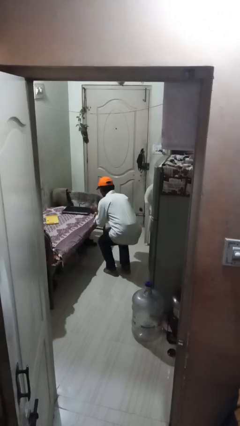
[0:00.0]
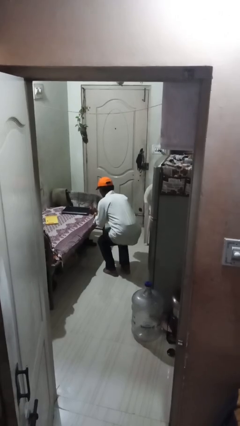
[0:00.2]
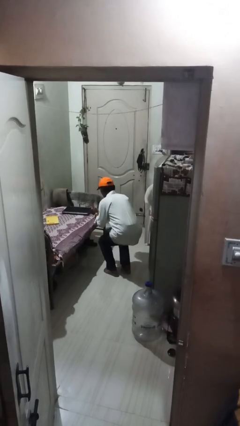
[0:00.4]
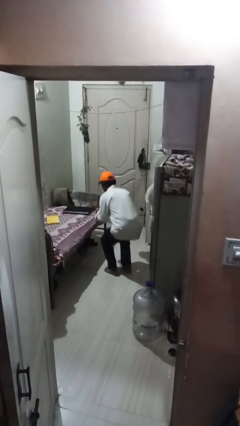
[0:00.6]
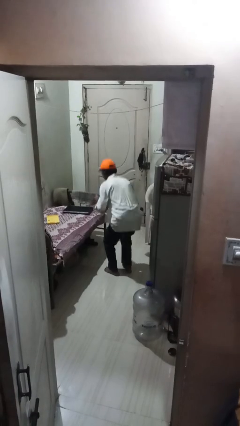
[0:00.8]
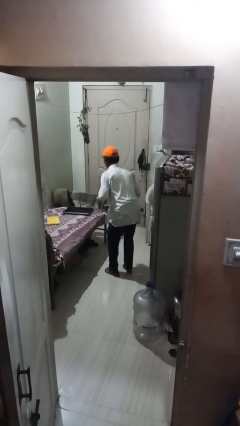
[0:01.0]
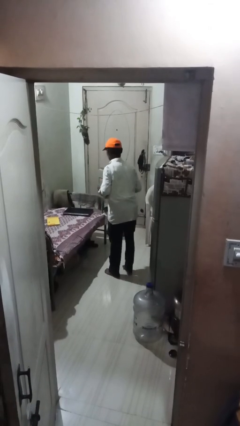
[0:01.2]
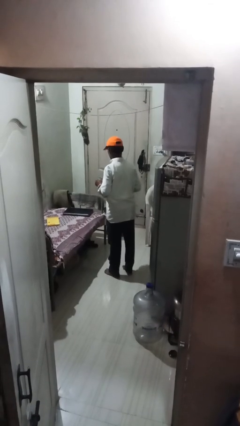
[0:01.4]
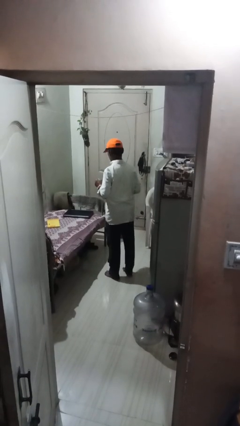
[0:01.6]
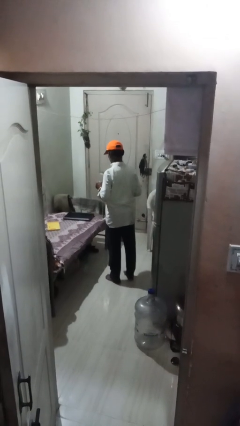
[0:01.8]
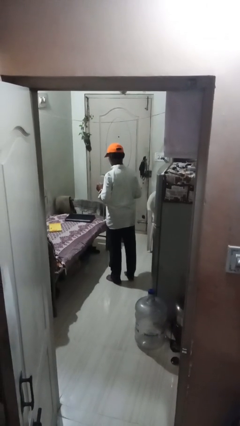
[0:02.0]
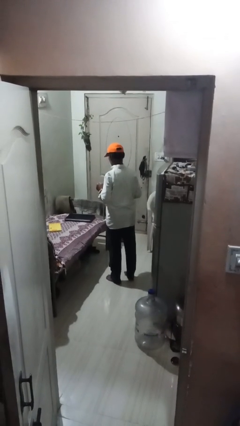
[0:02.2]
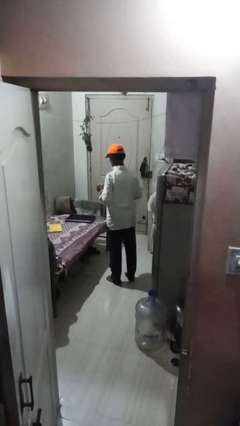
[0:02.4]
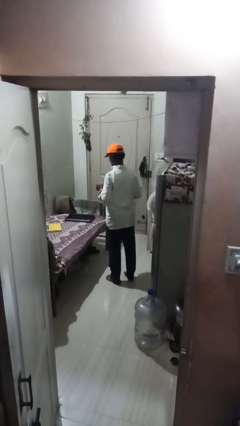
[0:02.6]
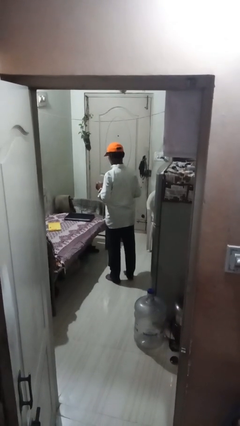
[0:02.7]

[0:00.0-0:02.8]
person stands up

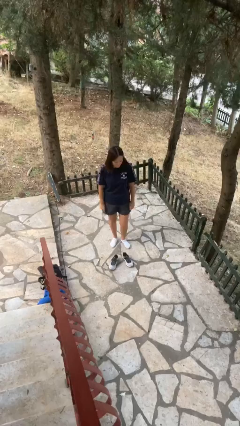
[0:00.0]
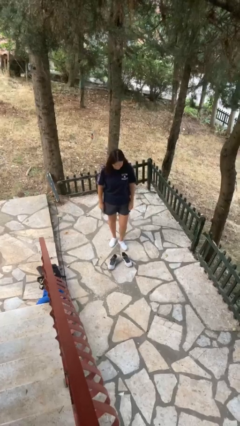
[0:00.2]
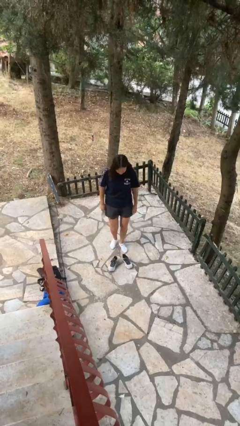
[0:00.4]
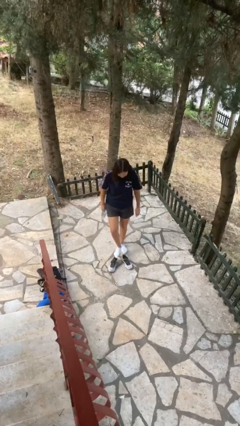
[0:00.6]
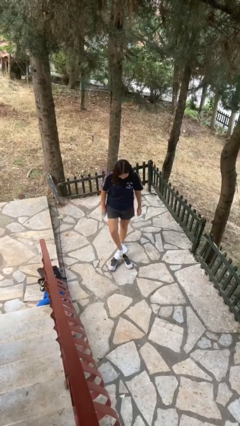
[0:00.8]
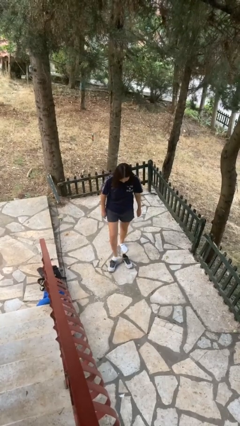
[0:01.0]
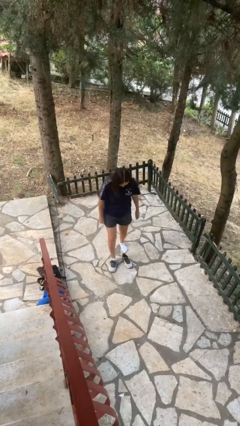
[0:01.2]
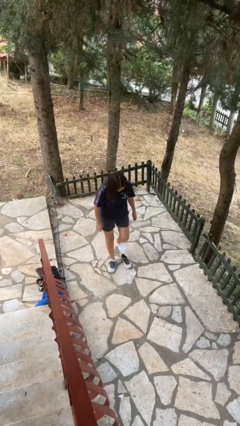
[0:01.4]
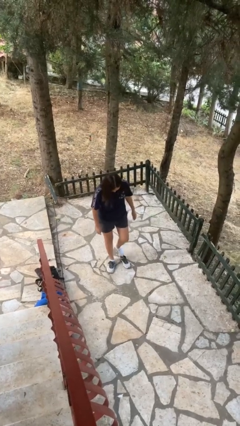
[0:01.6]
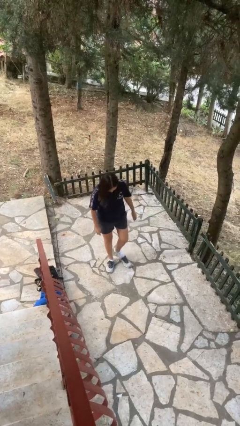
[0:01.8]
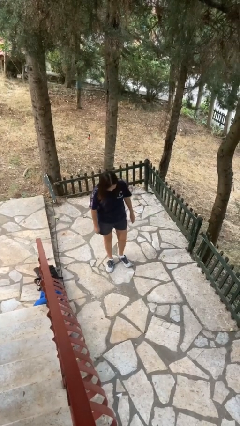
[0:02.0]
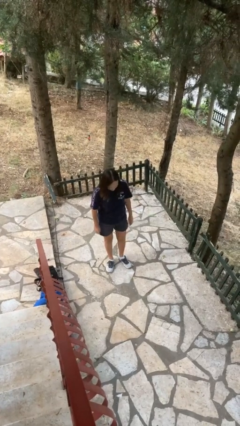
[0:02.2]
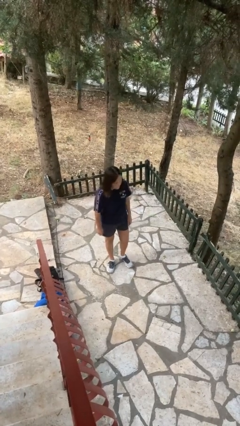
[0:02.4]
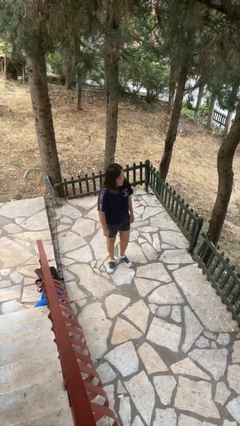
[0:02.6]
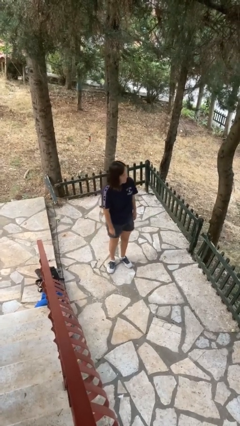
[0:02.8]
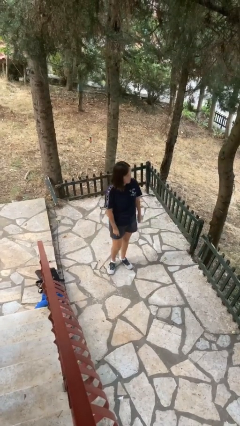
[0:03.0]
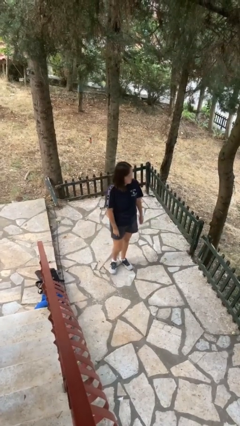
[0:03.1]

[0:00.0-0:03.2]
person puts on shoes

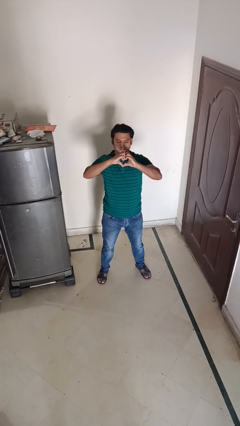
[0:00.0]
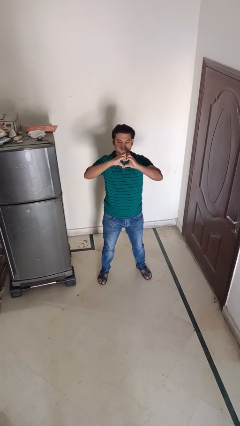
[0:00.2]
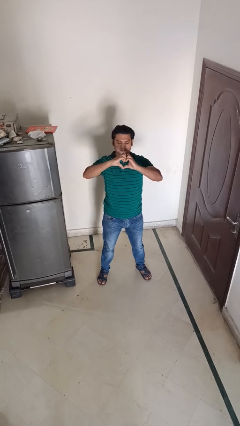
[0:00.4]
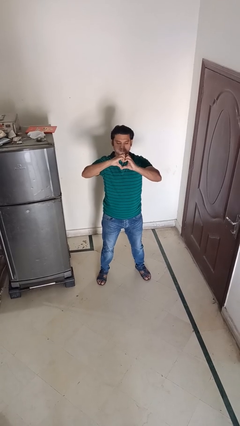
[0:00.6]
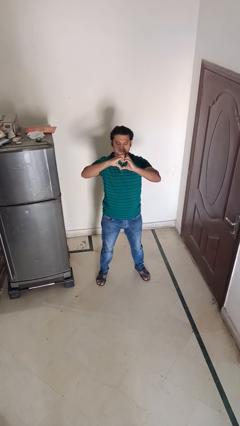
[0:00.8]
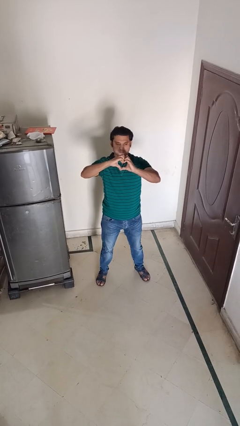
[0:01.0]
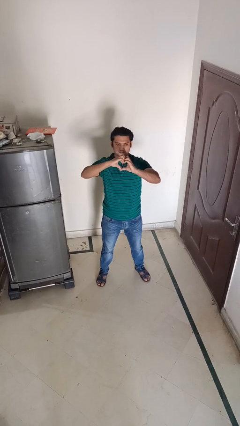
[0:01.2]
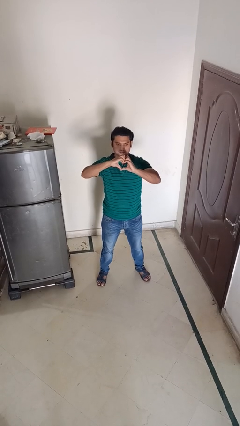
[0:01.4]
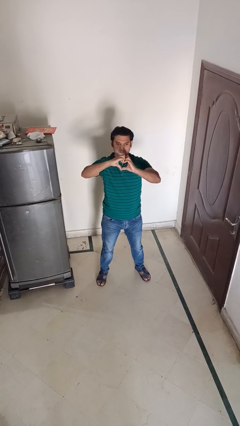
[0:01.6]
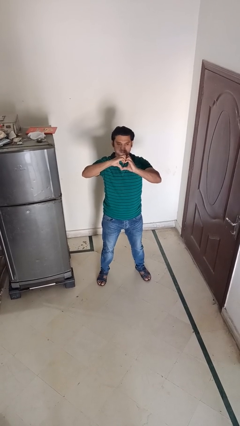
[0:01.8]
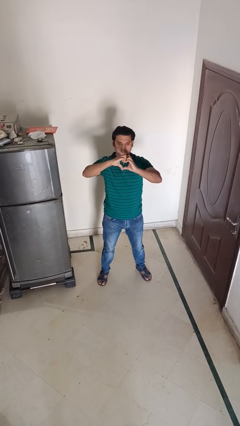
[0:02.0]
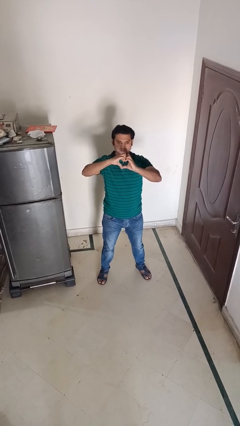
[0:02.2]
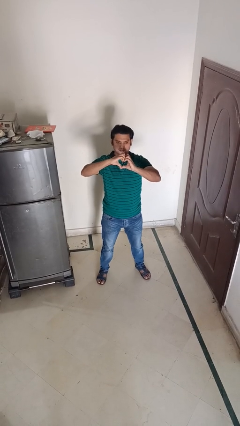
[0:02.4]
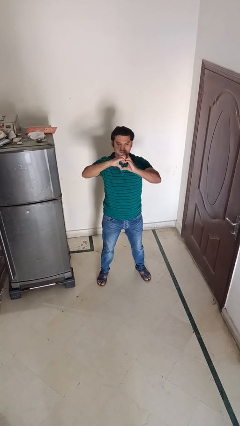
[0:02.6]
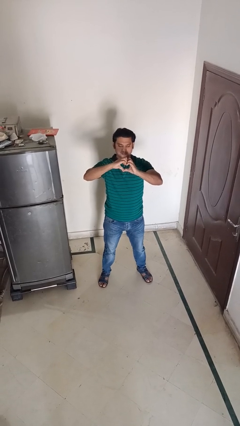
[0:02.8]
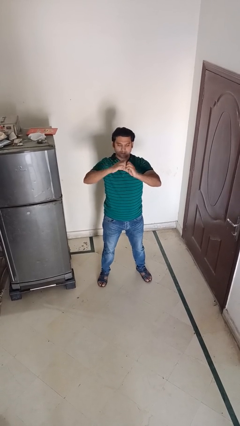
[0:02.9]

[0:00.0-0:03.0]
person gestures heart

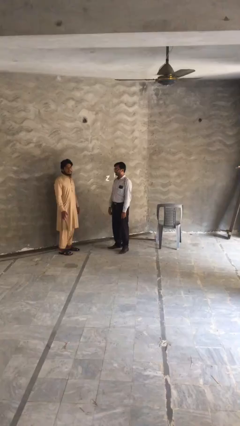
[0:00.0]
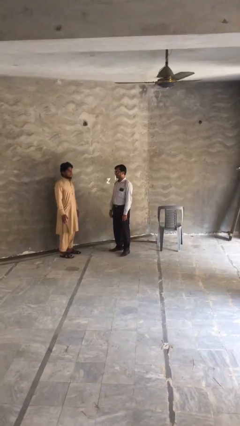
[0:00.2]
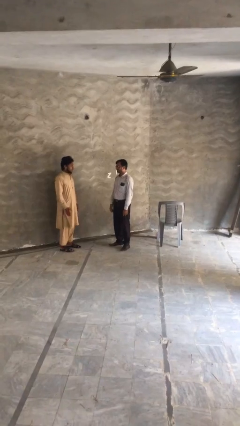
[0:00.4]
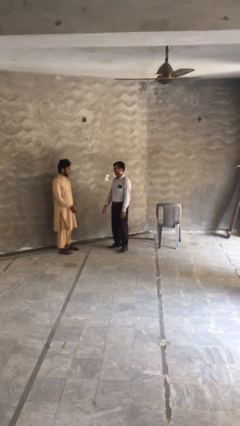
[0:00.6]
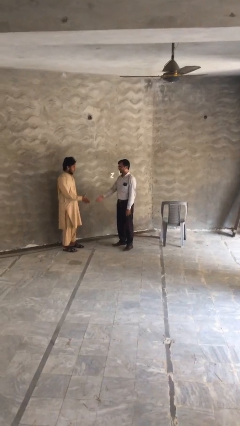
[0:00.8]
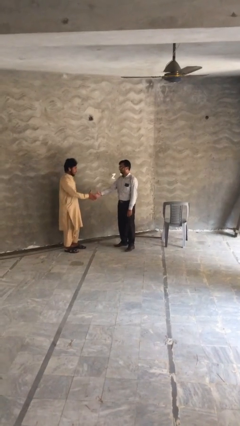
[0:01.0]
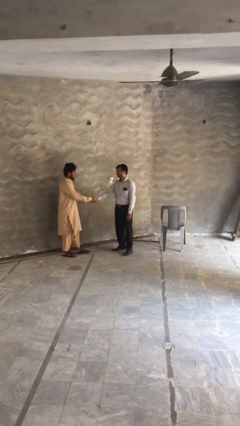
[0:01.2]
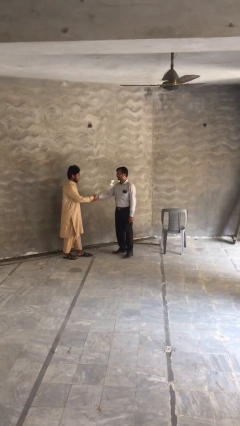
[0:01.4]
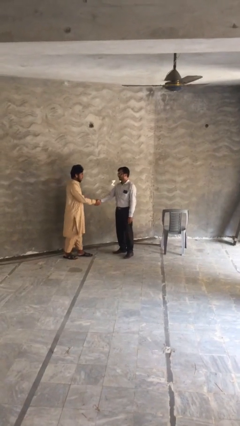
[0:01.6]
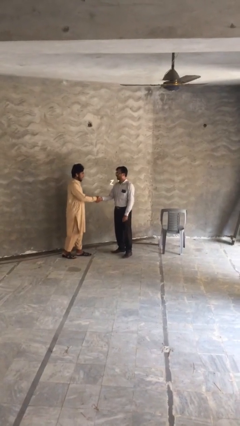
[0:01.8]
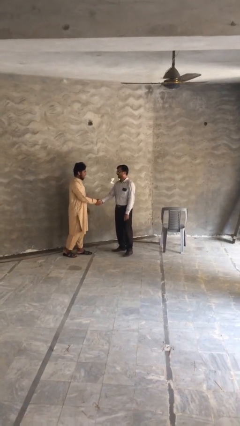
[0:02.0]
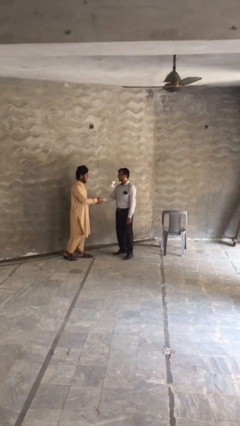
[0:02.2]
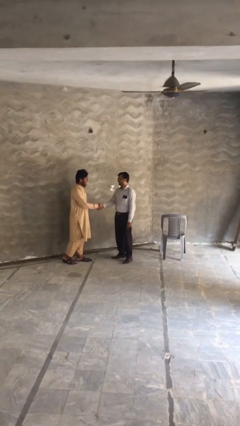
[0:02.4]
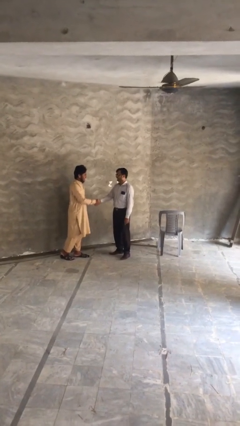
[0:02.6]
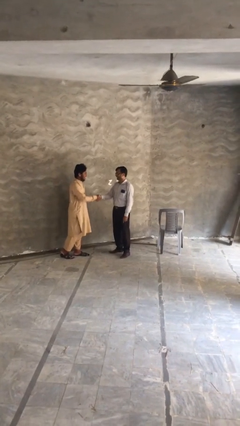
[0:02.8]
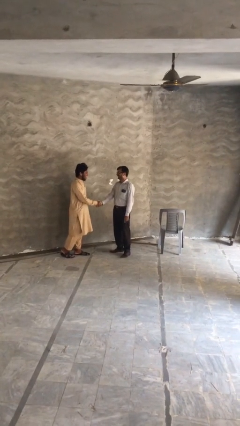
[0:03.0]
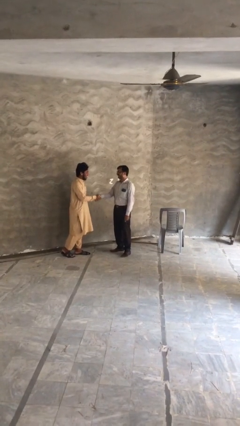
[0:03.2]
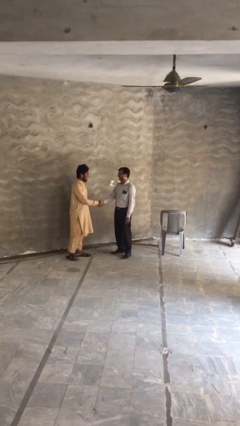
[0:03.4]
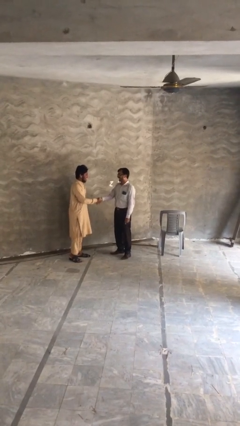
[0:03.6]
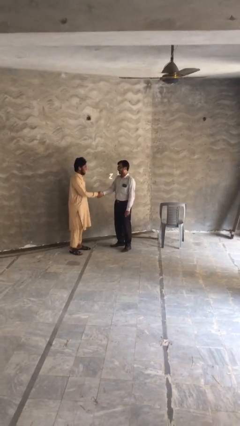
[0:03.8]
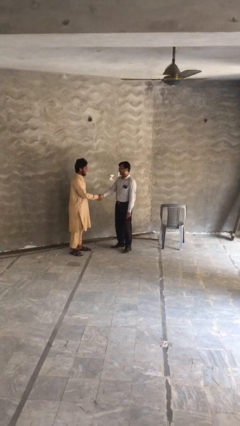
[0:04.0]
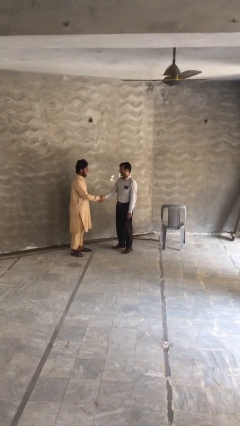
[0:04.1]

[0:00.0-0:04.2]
person shakes hand

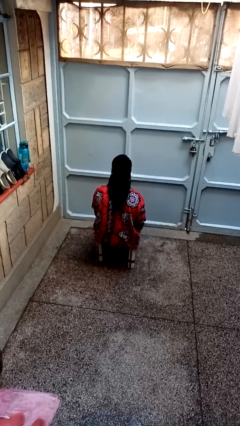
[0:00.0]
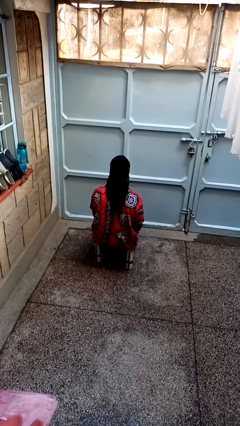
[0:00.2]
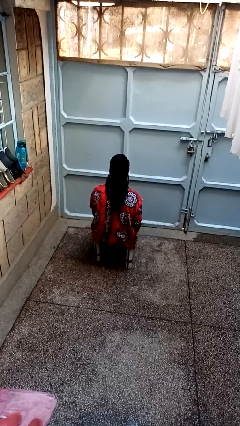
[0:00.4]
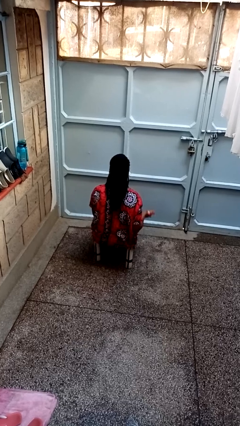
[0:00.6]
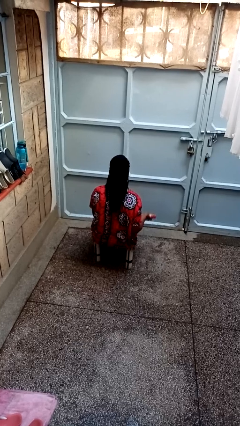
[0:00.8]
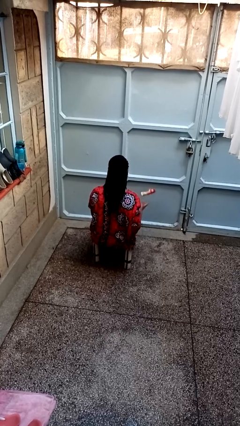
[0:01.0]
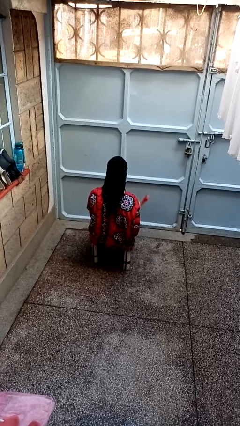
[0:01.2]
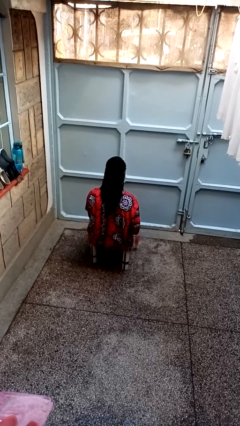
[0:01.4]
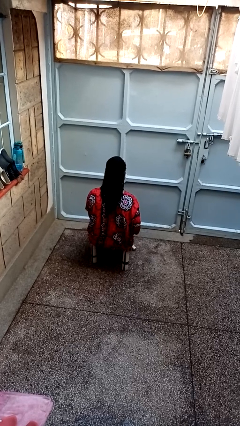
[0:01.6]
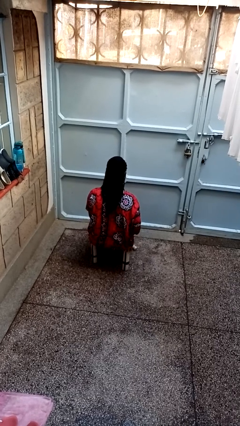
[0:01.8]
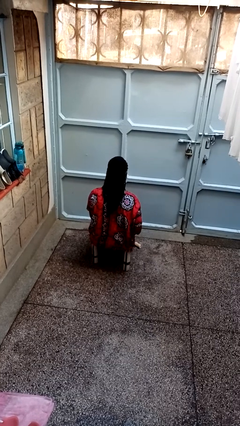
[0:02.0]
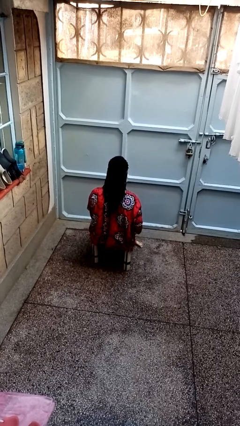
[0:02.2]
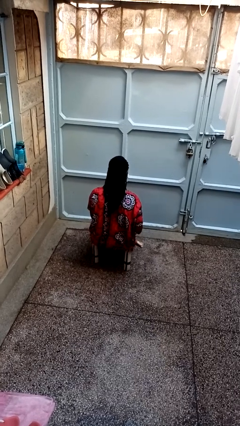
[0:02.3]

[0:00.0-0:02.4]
person throws object into air

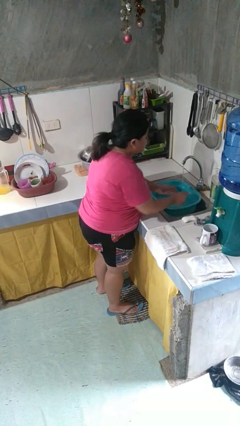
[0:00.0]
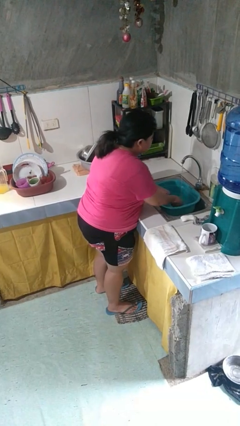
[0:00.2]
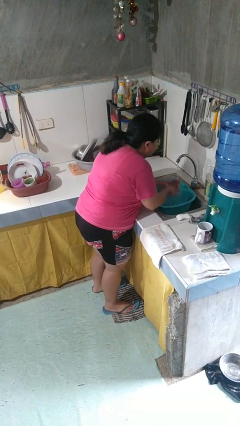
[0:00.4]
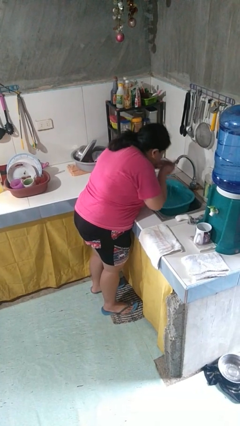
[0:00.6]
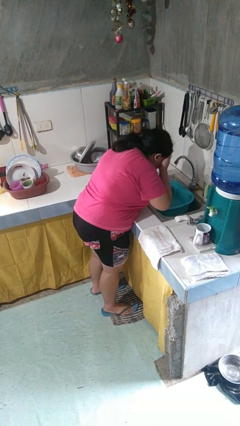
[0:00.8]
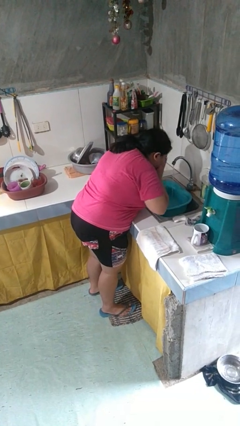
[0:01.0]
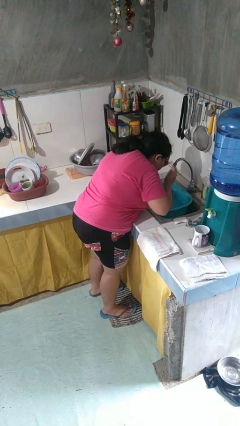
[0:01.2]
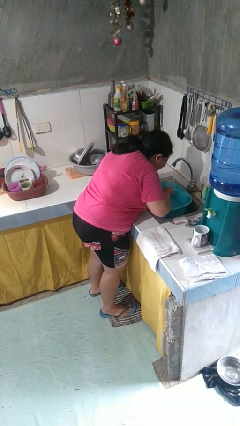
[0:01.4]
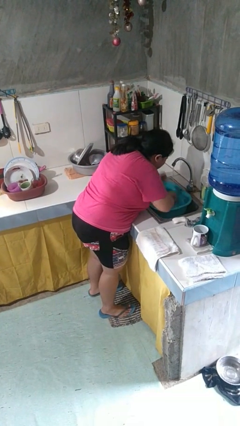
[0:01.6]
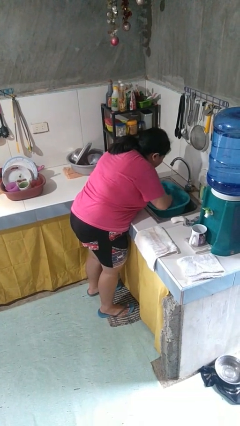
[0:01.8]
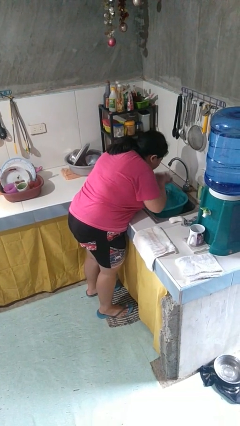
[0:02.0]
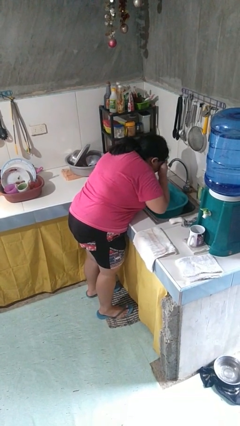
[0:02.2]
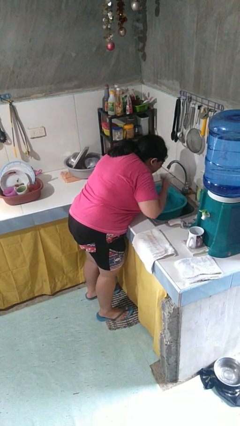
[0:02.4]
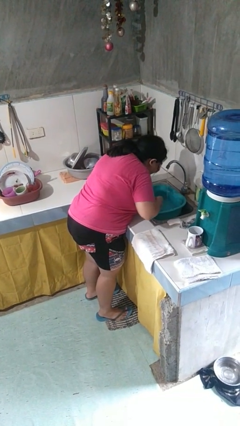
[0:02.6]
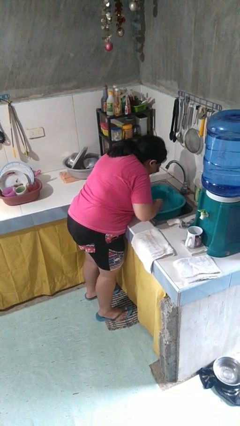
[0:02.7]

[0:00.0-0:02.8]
person washes face
